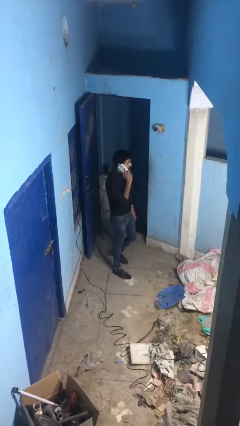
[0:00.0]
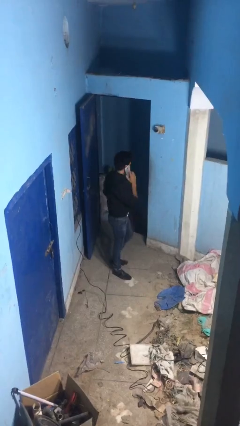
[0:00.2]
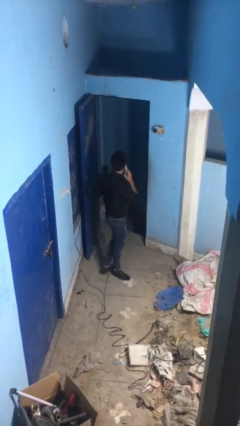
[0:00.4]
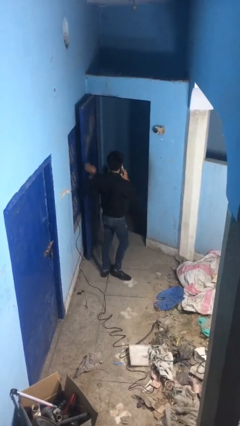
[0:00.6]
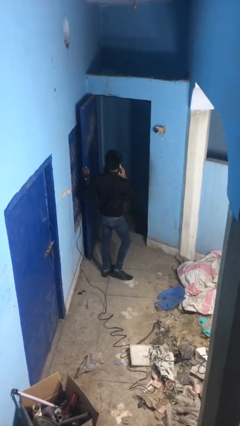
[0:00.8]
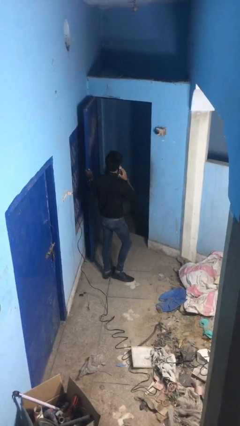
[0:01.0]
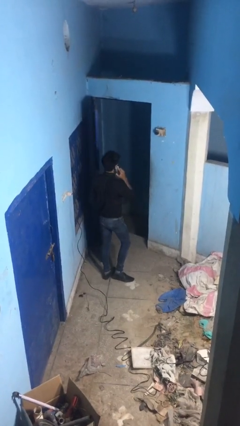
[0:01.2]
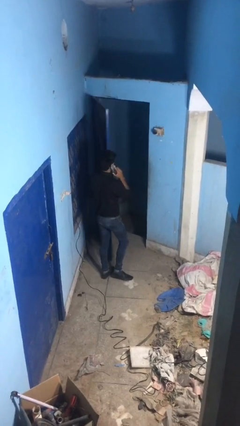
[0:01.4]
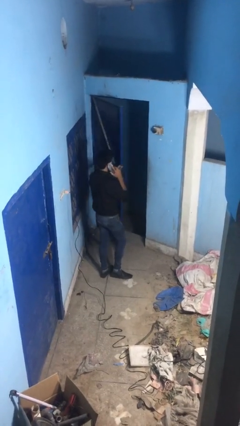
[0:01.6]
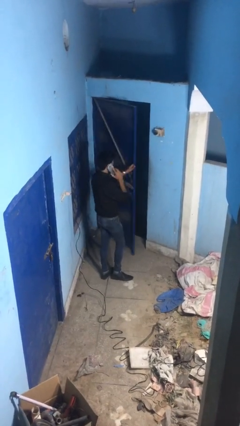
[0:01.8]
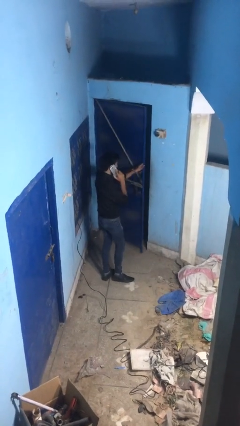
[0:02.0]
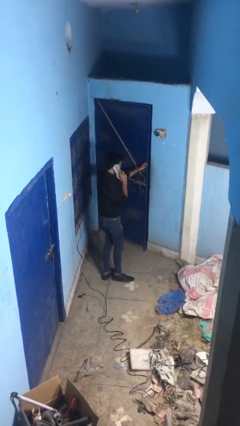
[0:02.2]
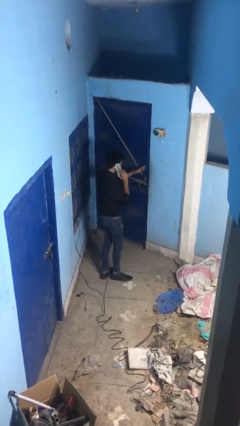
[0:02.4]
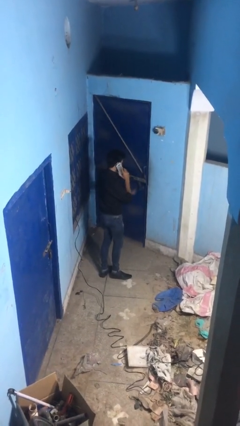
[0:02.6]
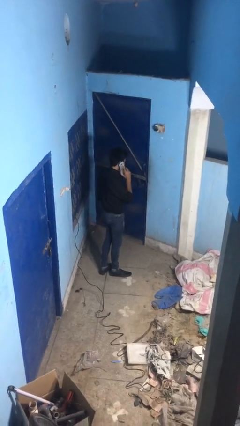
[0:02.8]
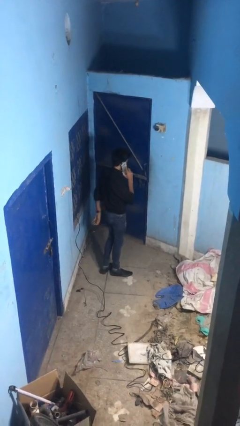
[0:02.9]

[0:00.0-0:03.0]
person closes facility door

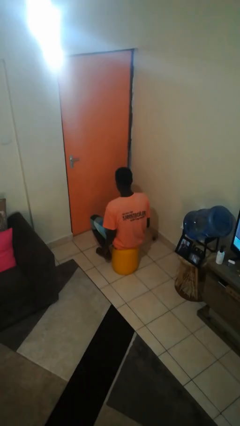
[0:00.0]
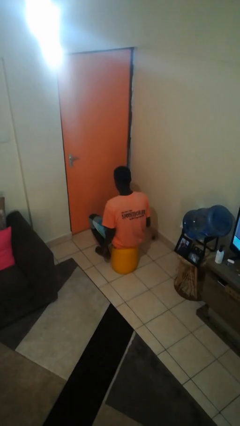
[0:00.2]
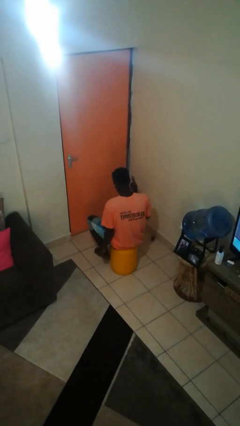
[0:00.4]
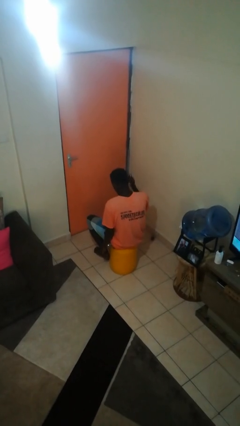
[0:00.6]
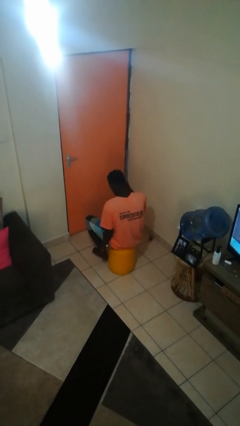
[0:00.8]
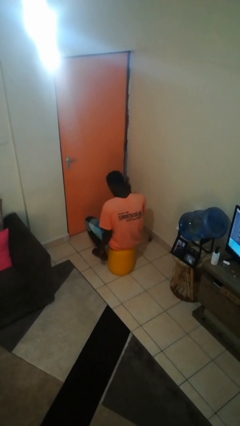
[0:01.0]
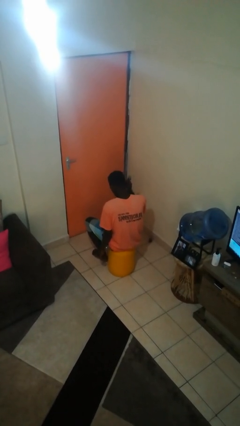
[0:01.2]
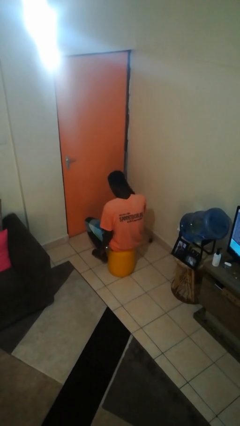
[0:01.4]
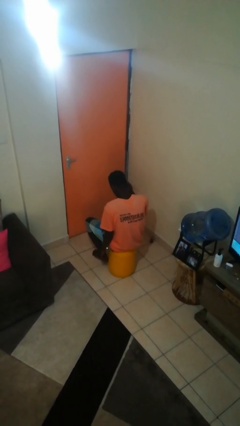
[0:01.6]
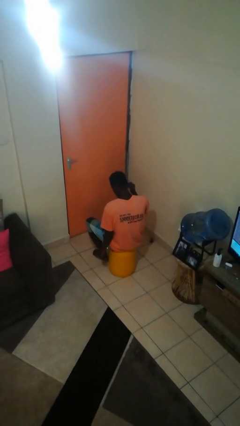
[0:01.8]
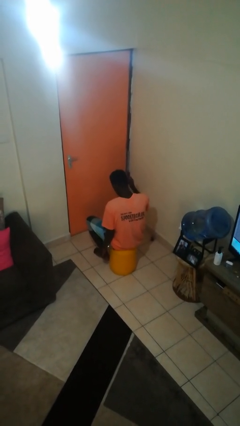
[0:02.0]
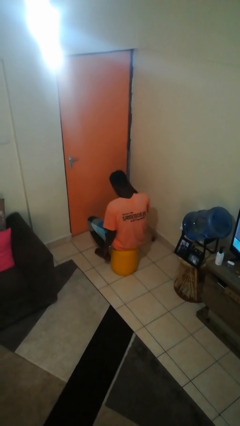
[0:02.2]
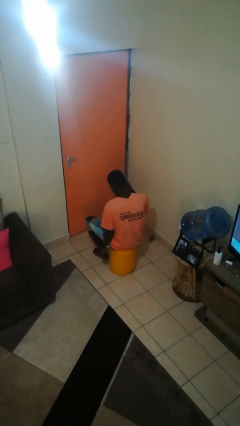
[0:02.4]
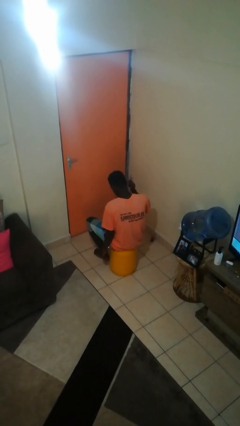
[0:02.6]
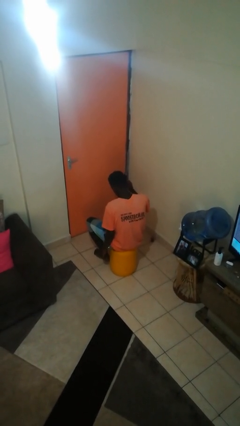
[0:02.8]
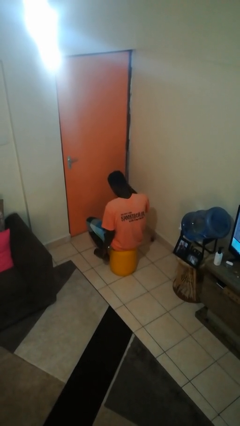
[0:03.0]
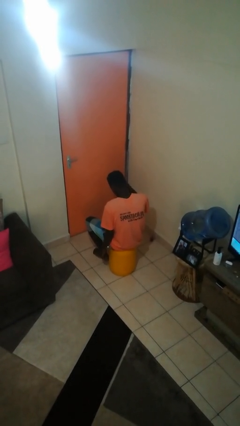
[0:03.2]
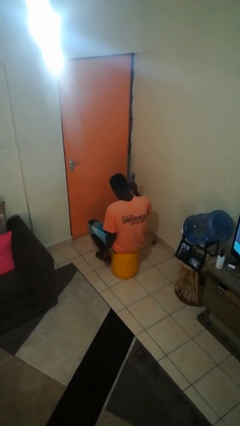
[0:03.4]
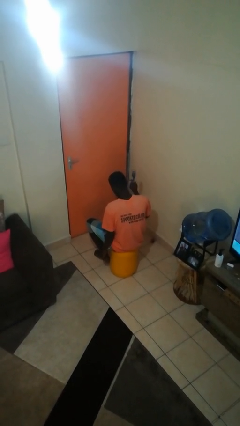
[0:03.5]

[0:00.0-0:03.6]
person brushes hair

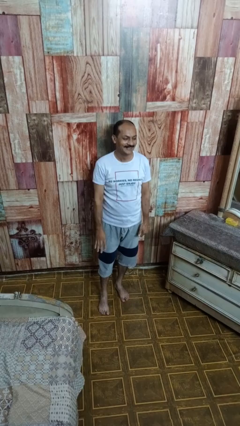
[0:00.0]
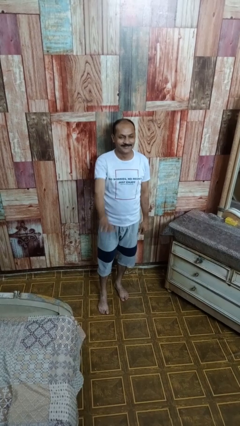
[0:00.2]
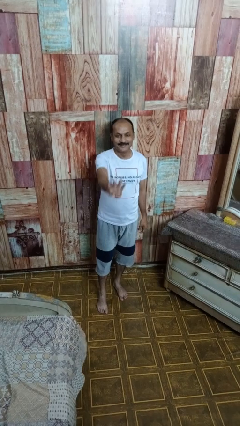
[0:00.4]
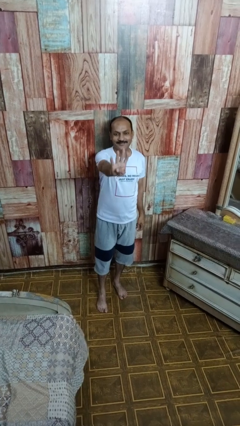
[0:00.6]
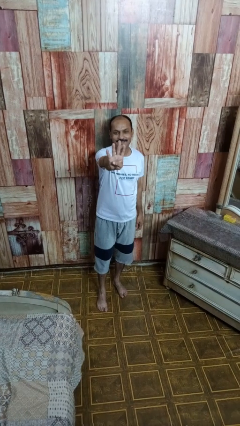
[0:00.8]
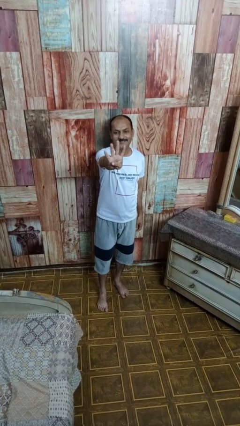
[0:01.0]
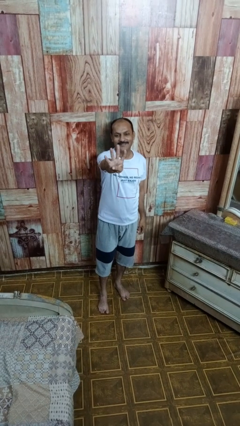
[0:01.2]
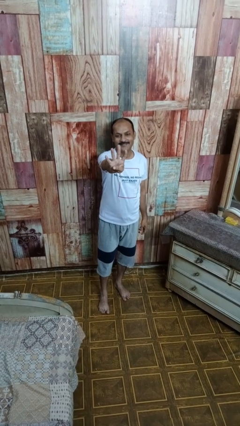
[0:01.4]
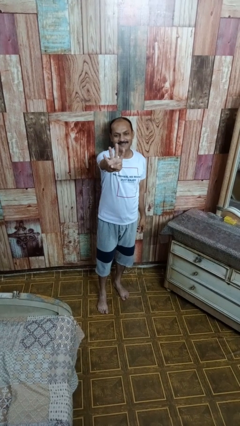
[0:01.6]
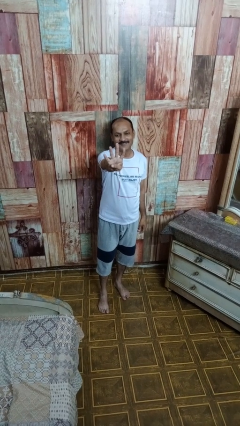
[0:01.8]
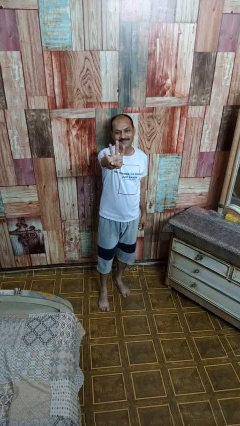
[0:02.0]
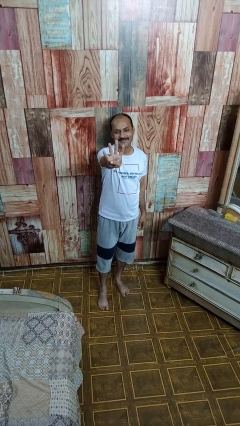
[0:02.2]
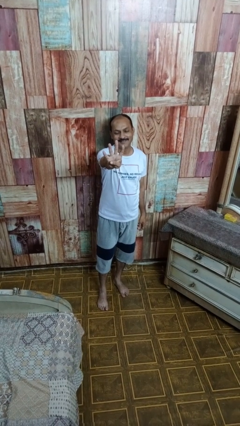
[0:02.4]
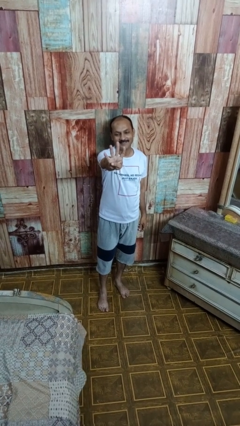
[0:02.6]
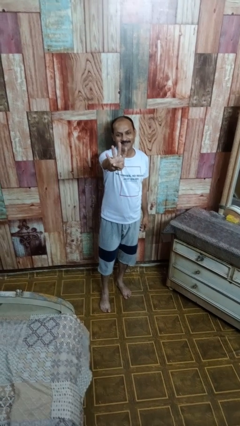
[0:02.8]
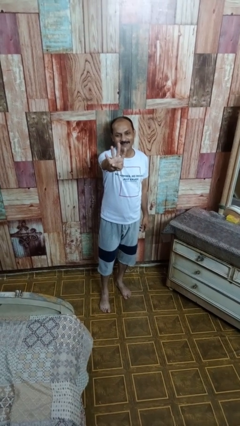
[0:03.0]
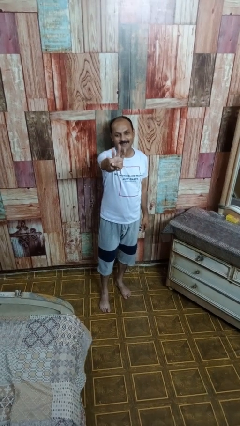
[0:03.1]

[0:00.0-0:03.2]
person gestures number four

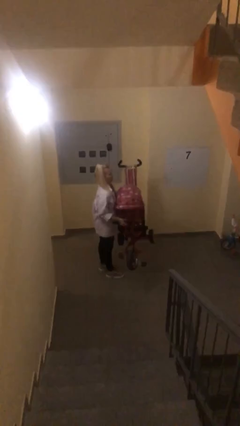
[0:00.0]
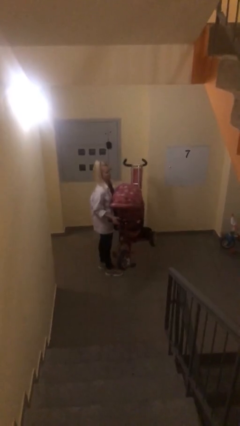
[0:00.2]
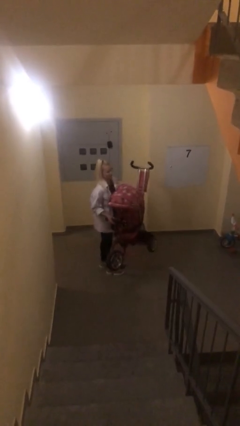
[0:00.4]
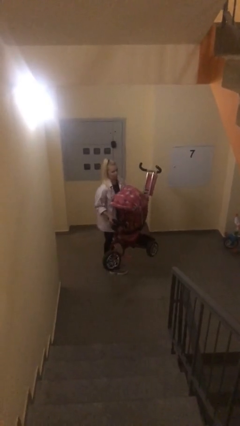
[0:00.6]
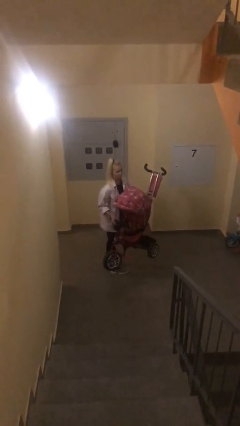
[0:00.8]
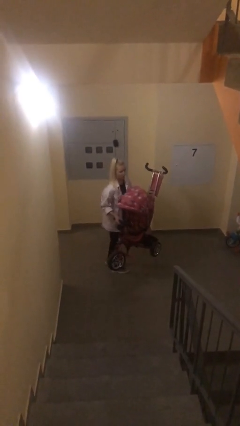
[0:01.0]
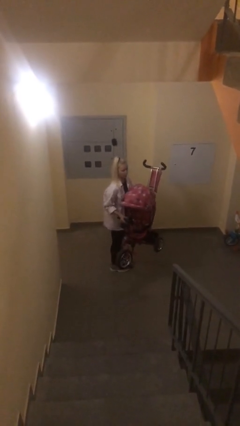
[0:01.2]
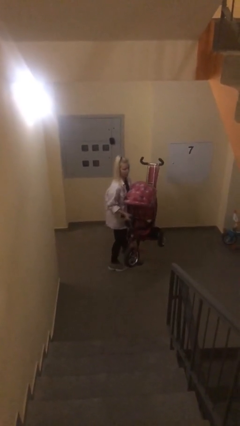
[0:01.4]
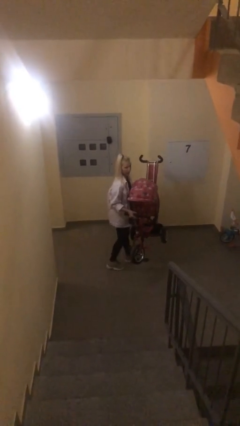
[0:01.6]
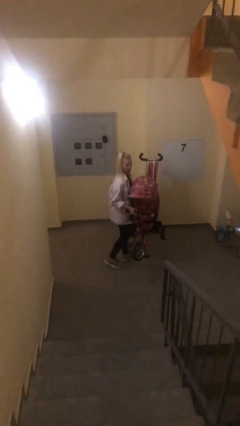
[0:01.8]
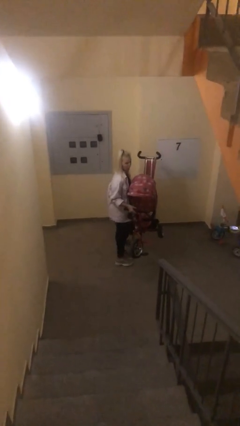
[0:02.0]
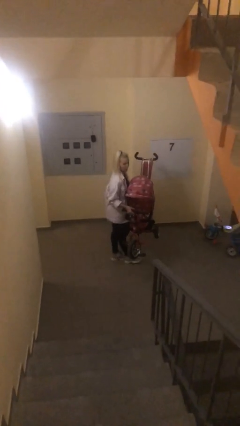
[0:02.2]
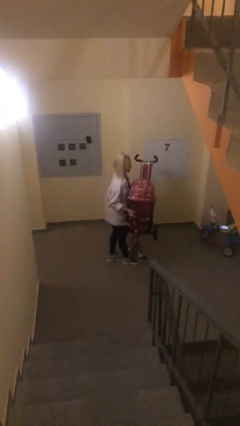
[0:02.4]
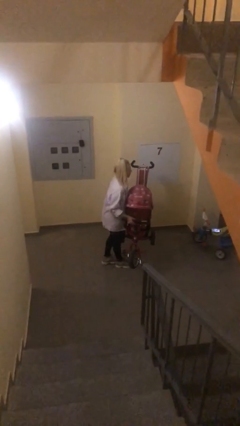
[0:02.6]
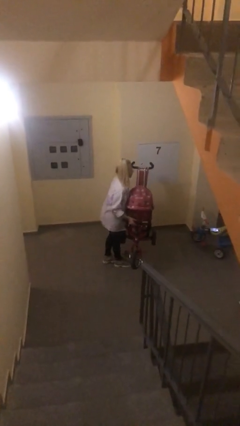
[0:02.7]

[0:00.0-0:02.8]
person carries heavy object

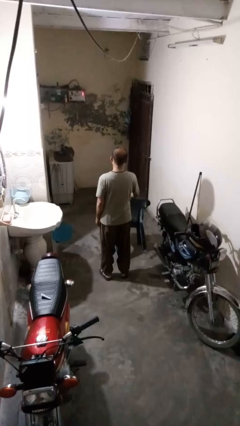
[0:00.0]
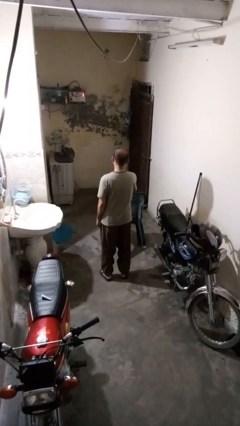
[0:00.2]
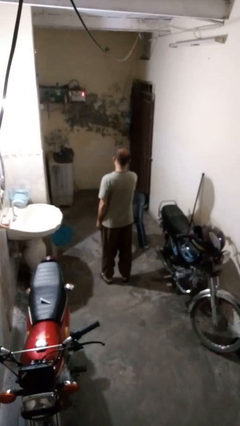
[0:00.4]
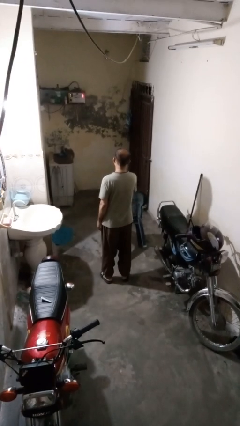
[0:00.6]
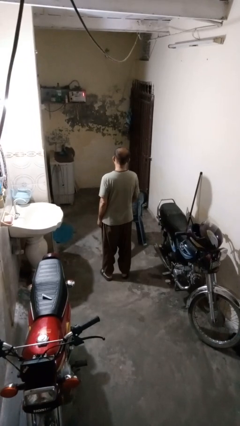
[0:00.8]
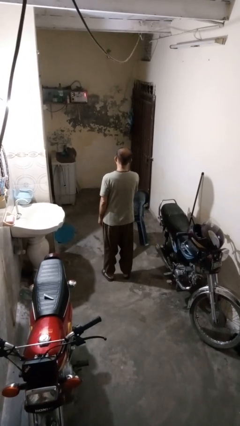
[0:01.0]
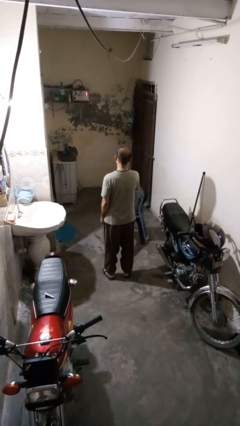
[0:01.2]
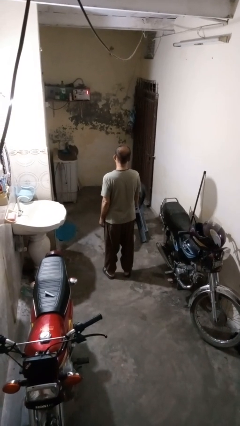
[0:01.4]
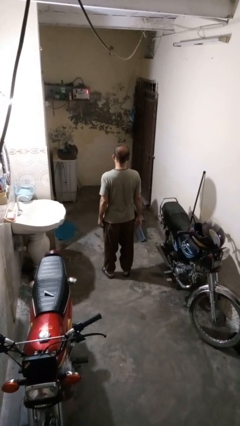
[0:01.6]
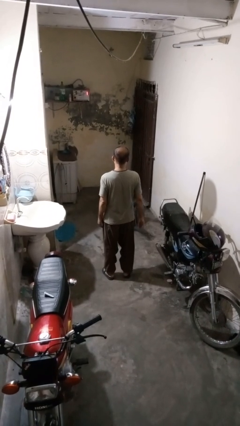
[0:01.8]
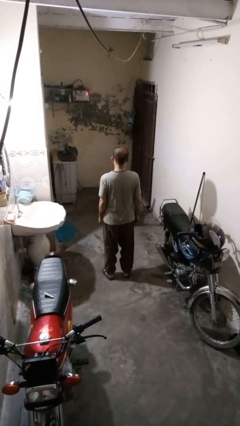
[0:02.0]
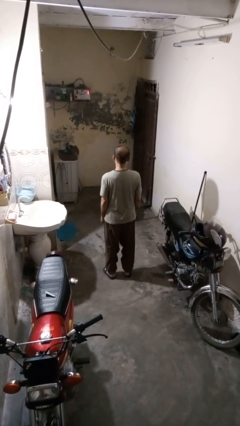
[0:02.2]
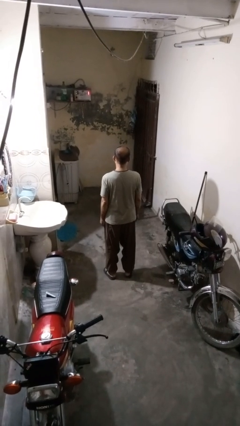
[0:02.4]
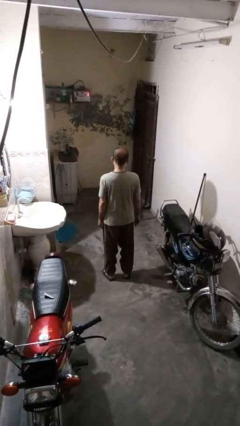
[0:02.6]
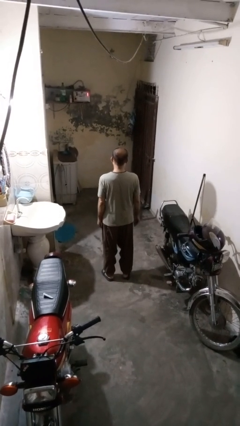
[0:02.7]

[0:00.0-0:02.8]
person knocks over furniture

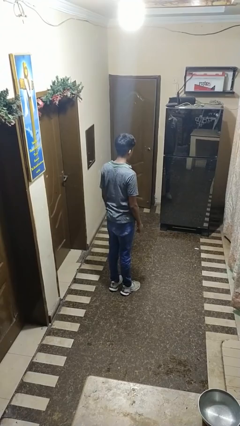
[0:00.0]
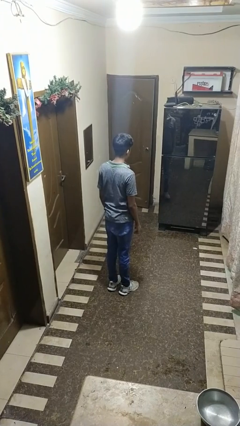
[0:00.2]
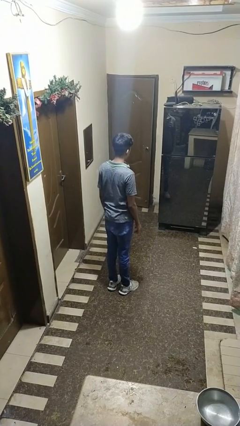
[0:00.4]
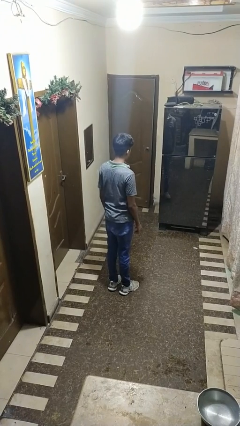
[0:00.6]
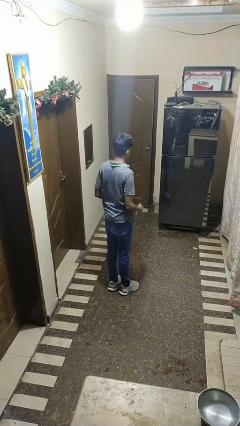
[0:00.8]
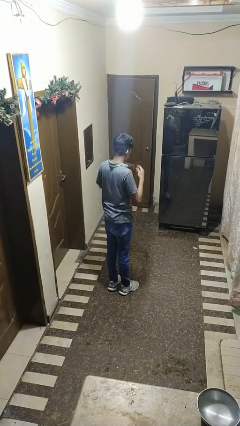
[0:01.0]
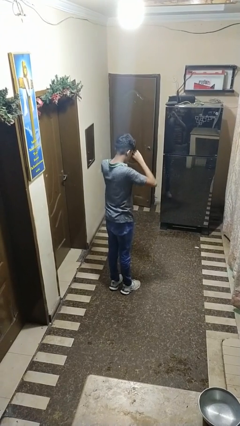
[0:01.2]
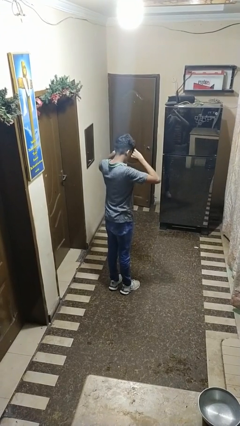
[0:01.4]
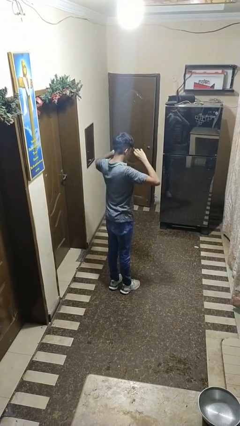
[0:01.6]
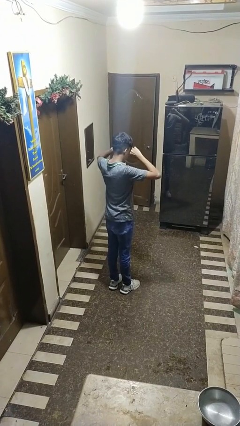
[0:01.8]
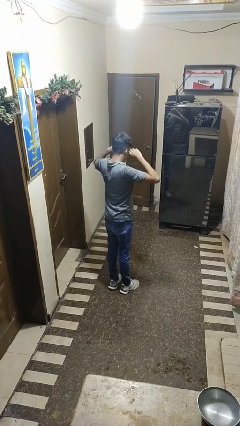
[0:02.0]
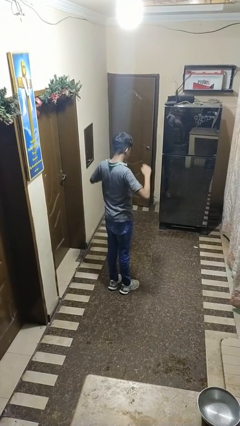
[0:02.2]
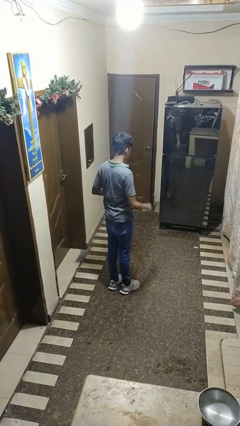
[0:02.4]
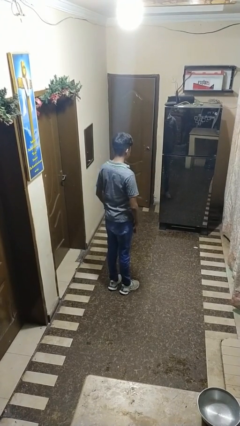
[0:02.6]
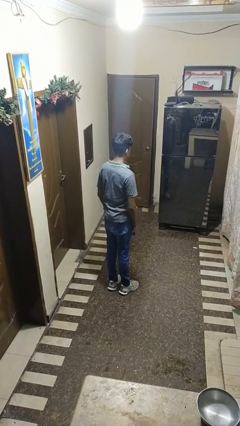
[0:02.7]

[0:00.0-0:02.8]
person rubs eyes
